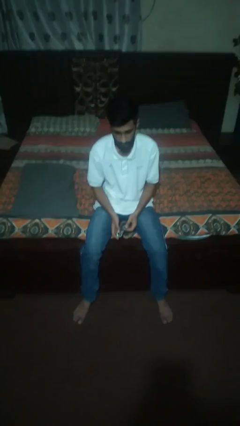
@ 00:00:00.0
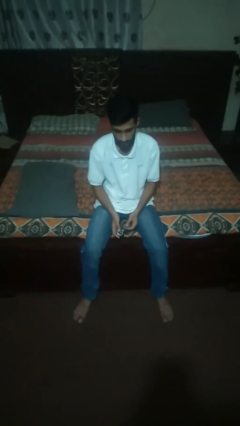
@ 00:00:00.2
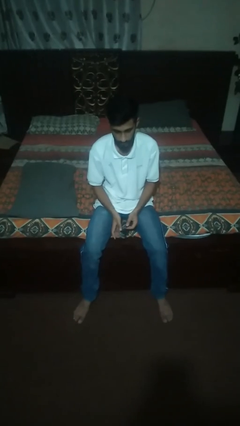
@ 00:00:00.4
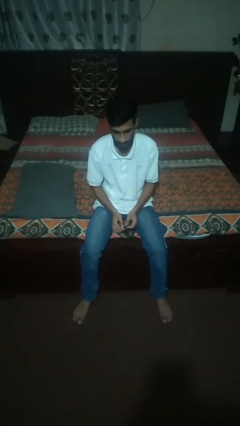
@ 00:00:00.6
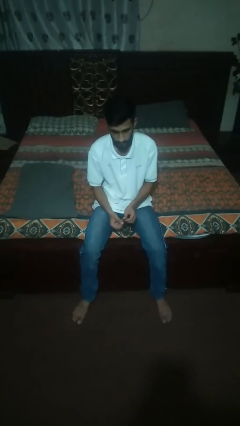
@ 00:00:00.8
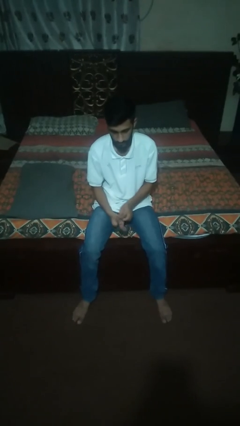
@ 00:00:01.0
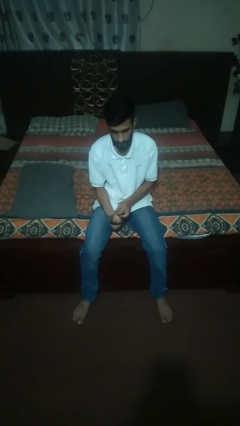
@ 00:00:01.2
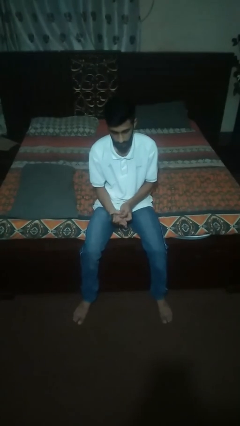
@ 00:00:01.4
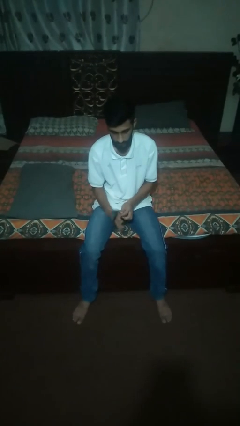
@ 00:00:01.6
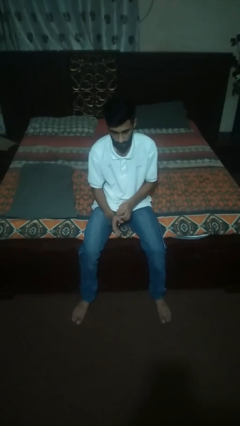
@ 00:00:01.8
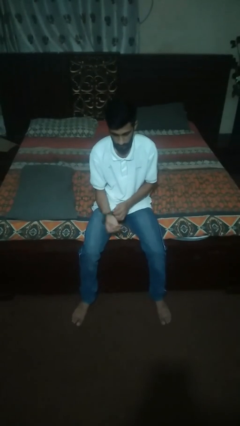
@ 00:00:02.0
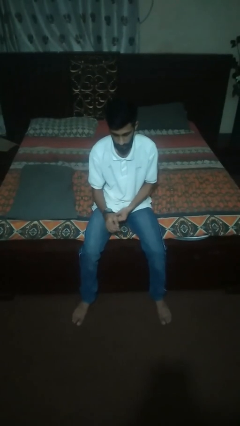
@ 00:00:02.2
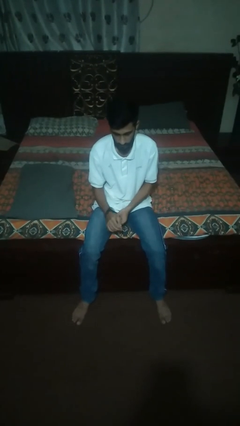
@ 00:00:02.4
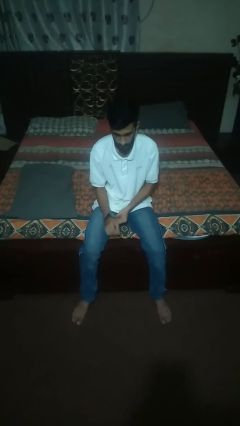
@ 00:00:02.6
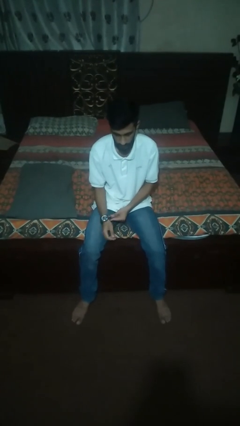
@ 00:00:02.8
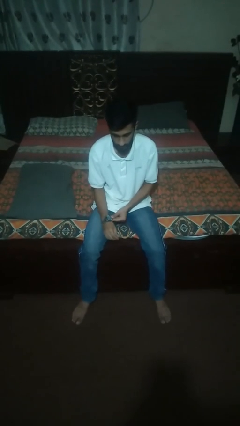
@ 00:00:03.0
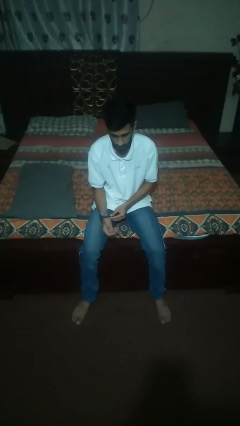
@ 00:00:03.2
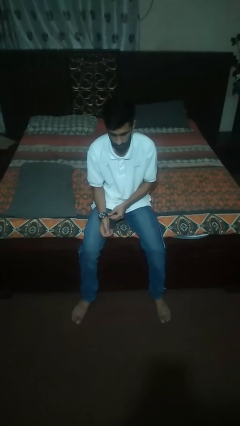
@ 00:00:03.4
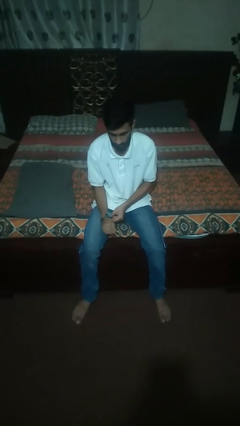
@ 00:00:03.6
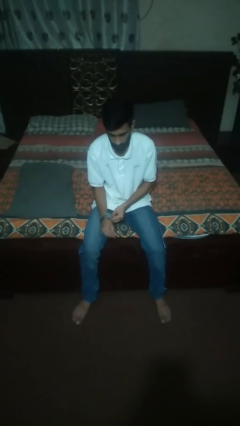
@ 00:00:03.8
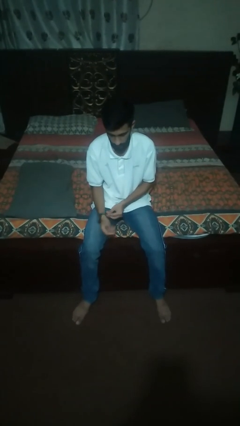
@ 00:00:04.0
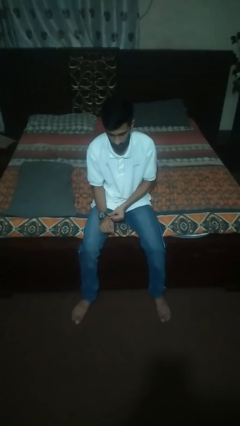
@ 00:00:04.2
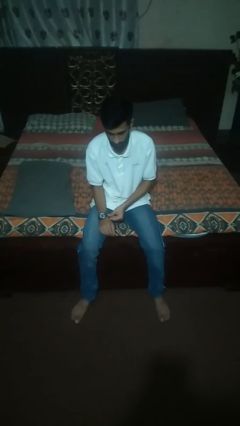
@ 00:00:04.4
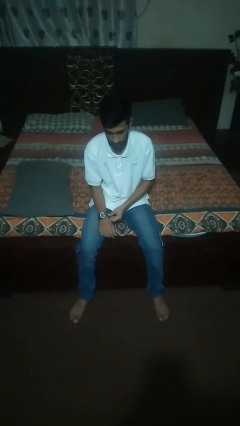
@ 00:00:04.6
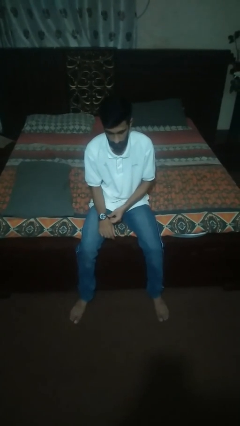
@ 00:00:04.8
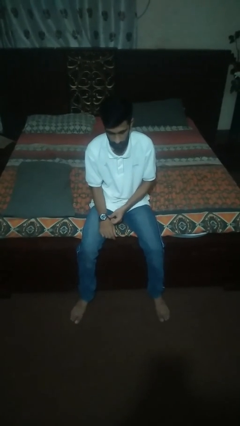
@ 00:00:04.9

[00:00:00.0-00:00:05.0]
person puts on wristwatch

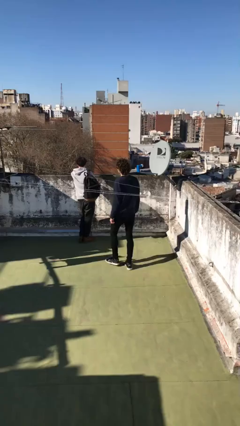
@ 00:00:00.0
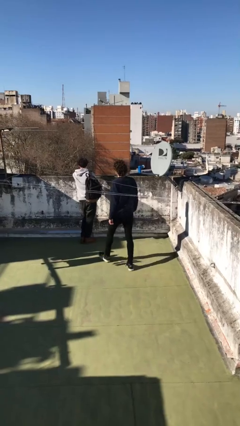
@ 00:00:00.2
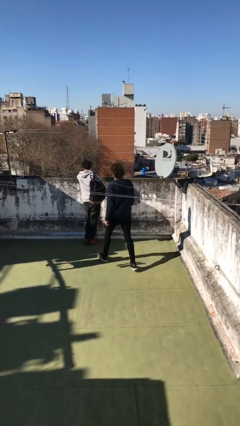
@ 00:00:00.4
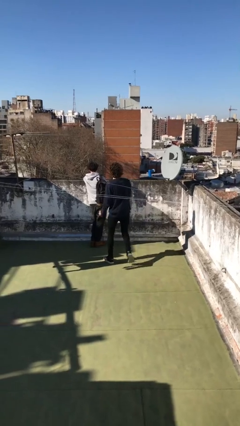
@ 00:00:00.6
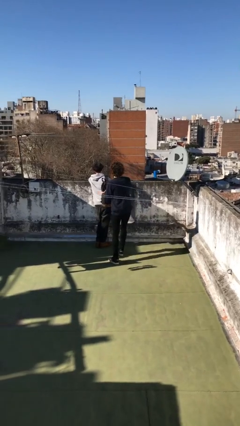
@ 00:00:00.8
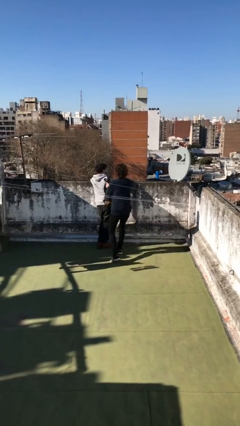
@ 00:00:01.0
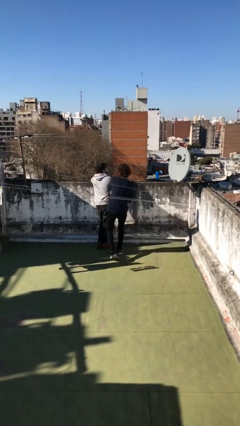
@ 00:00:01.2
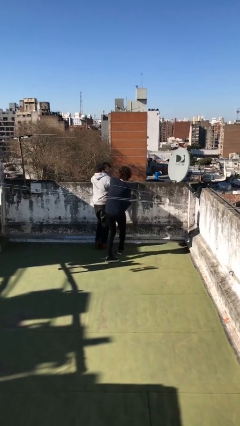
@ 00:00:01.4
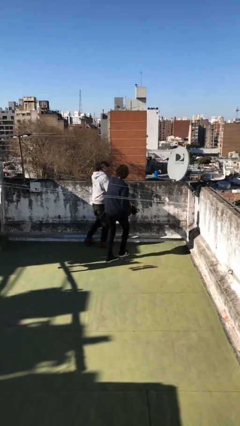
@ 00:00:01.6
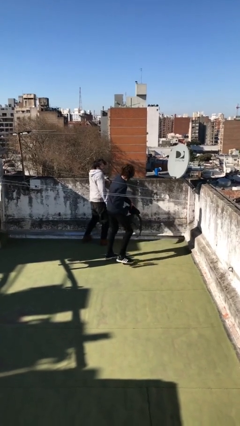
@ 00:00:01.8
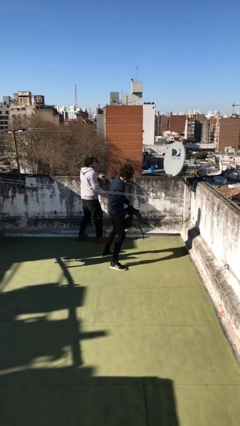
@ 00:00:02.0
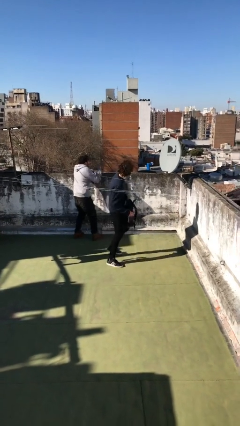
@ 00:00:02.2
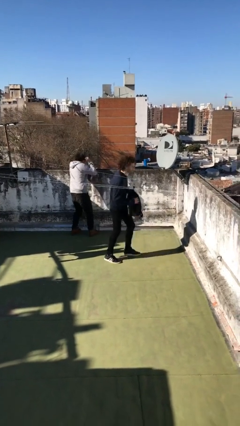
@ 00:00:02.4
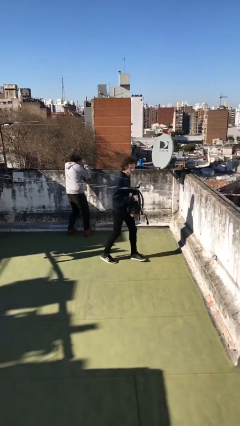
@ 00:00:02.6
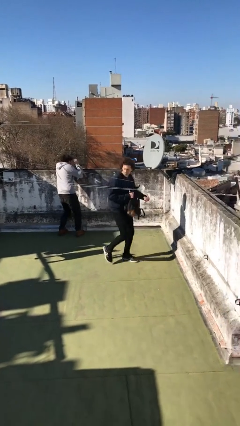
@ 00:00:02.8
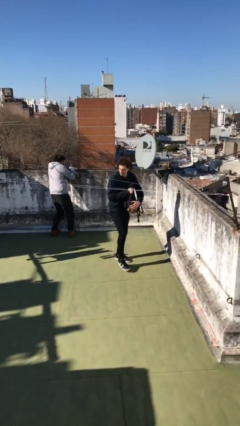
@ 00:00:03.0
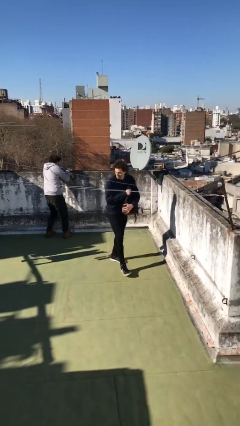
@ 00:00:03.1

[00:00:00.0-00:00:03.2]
person steals object from person

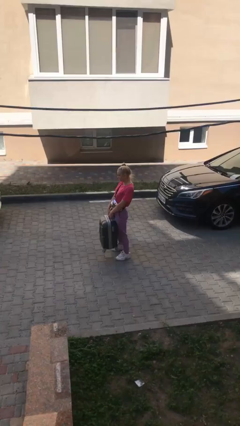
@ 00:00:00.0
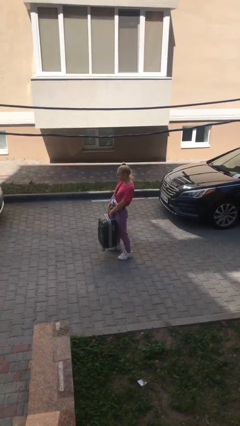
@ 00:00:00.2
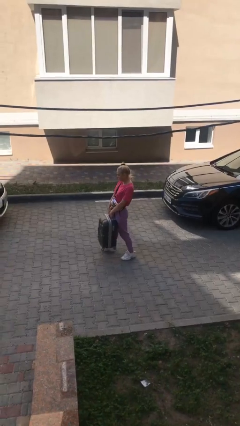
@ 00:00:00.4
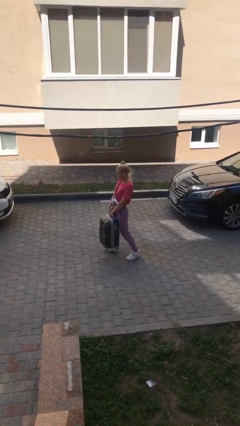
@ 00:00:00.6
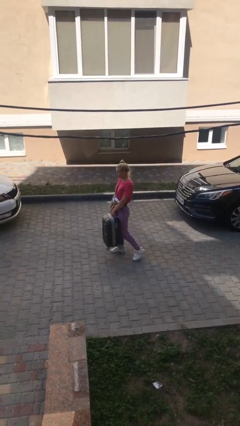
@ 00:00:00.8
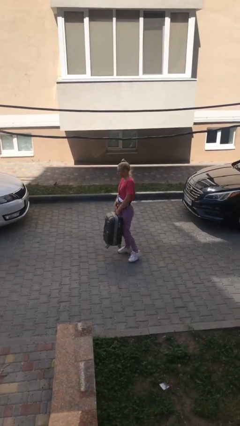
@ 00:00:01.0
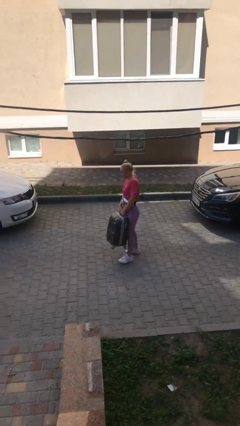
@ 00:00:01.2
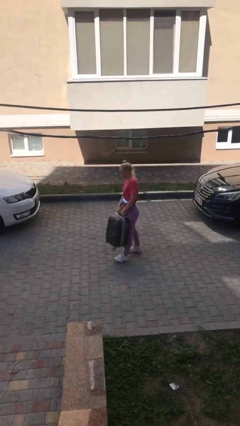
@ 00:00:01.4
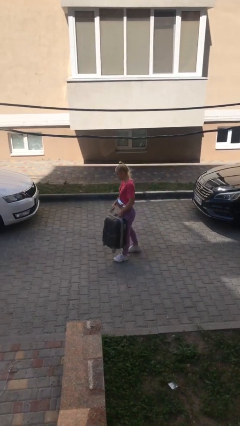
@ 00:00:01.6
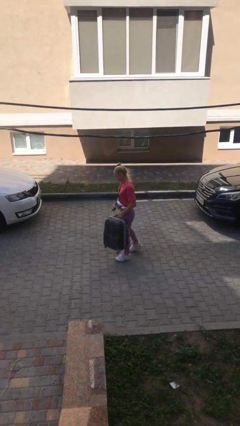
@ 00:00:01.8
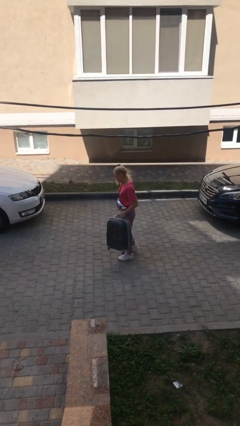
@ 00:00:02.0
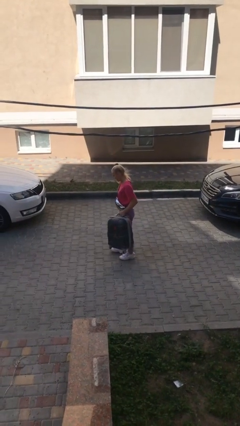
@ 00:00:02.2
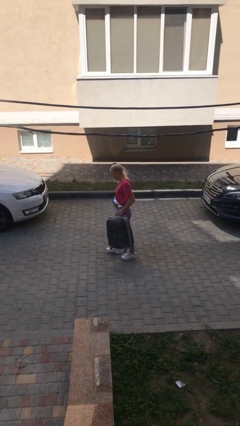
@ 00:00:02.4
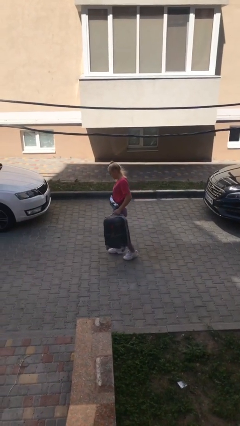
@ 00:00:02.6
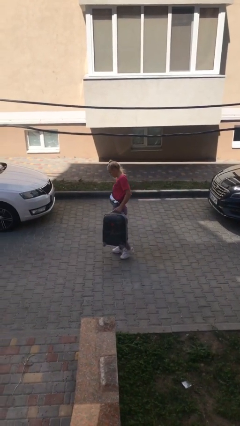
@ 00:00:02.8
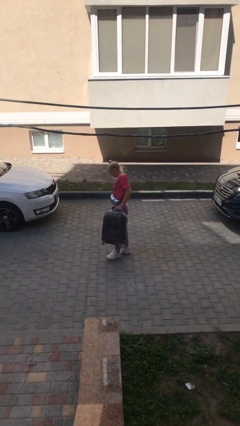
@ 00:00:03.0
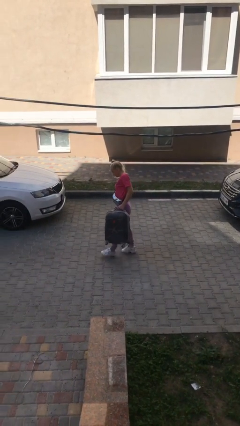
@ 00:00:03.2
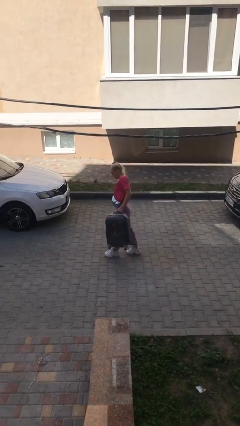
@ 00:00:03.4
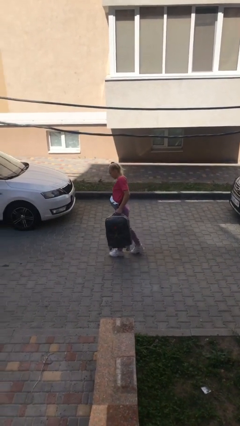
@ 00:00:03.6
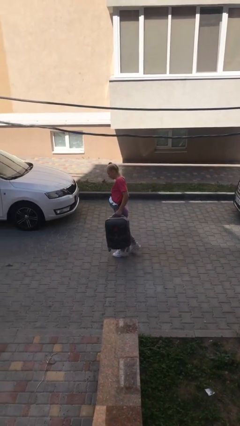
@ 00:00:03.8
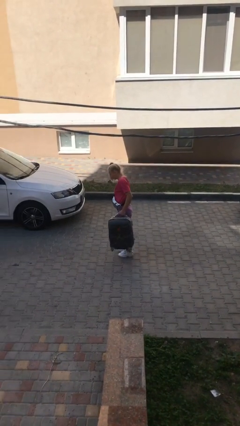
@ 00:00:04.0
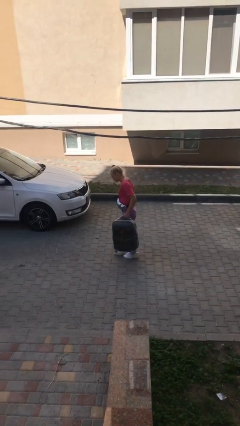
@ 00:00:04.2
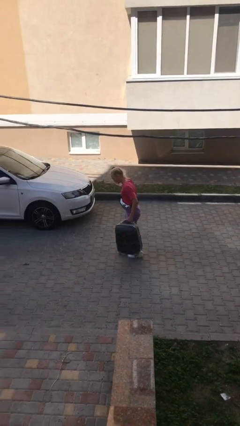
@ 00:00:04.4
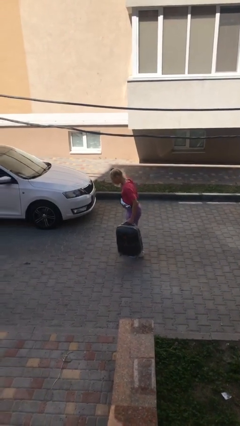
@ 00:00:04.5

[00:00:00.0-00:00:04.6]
person carries heavy object

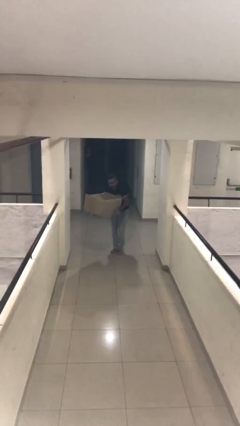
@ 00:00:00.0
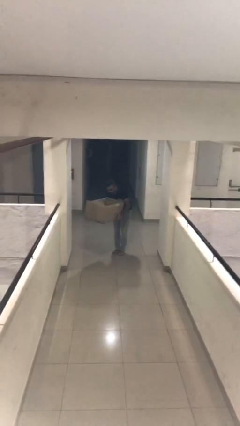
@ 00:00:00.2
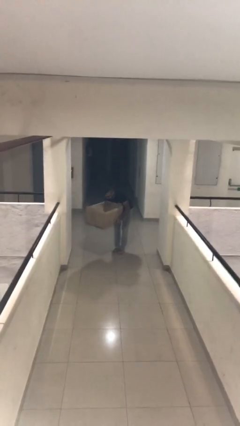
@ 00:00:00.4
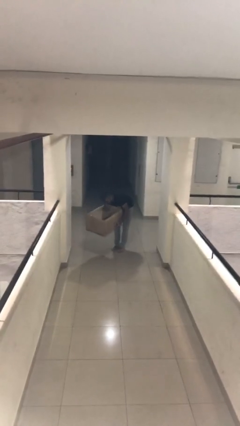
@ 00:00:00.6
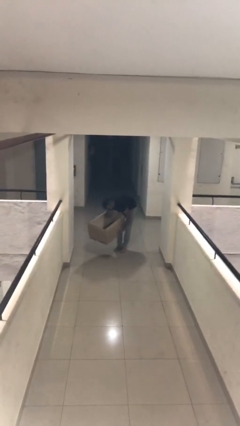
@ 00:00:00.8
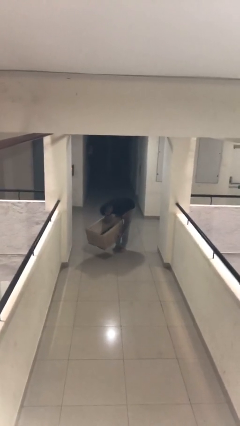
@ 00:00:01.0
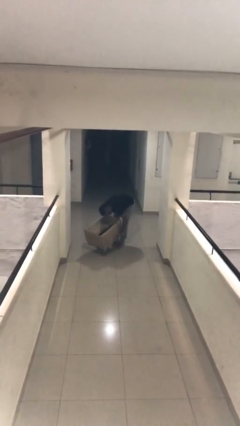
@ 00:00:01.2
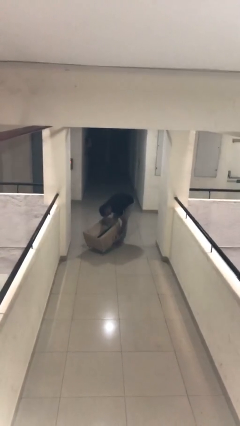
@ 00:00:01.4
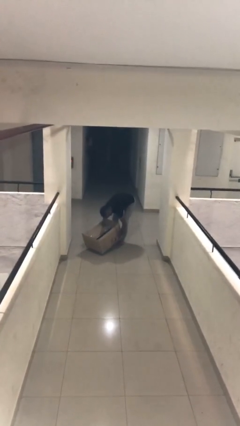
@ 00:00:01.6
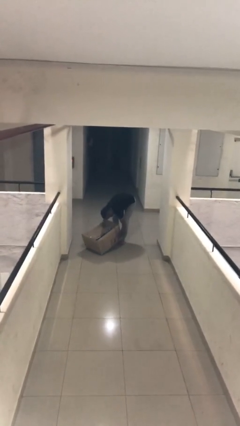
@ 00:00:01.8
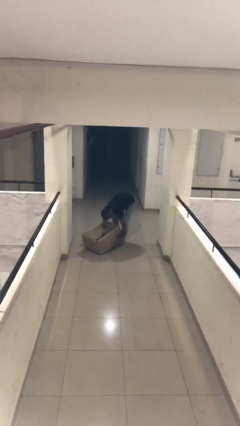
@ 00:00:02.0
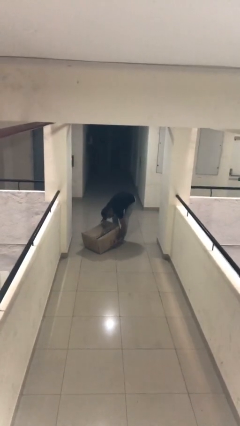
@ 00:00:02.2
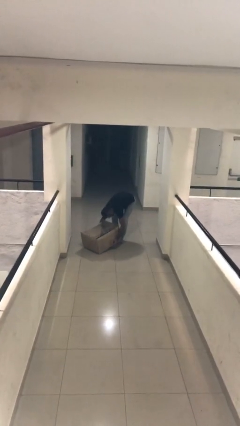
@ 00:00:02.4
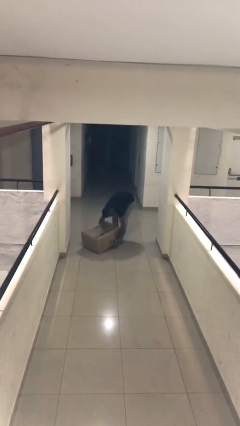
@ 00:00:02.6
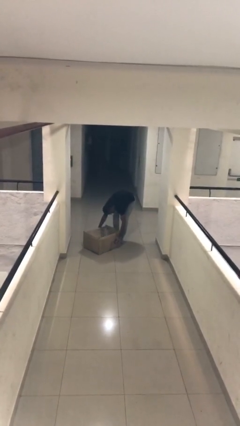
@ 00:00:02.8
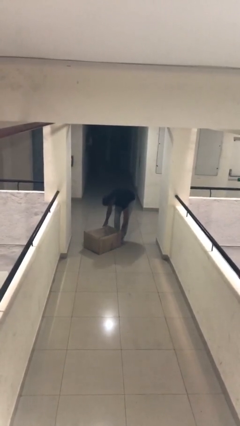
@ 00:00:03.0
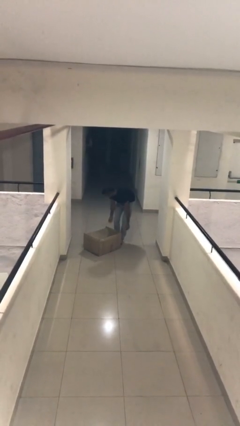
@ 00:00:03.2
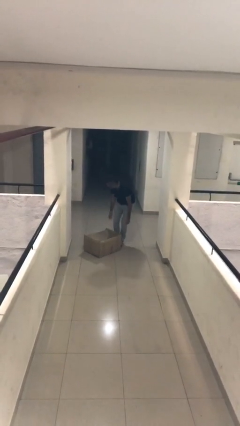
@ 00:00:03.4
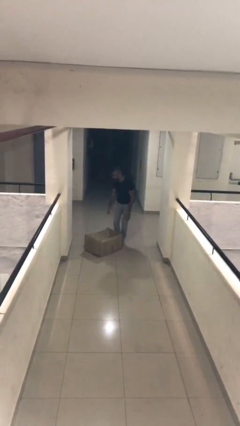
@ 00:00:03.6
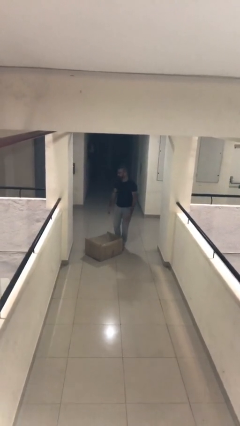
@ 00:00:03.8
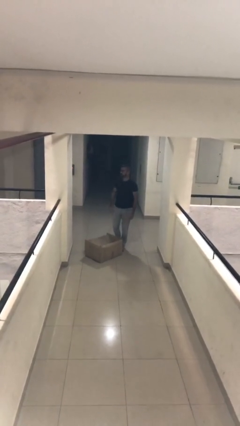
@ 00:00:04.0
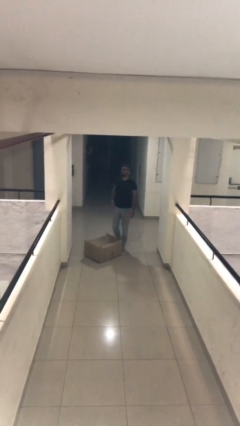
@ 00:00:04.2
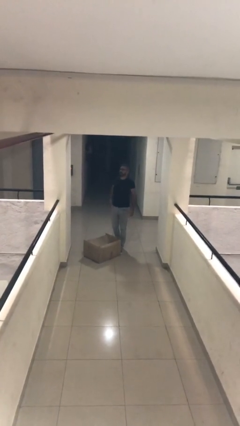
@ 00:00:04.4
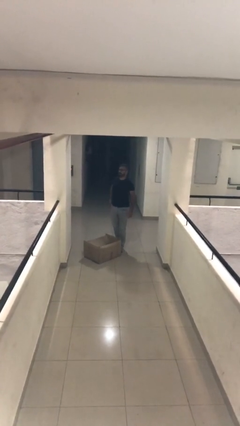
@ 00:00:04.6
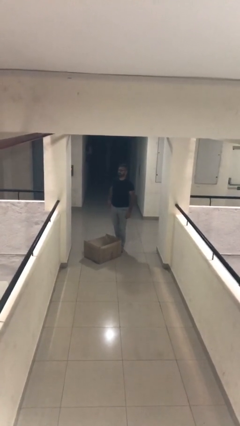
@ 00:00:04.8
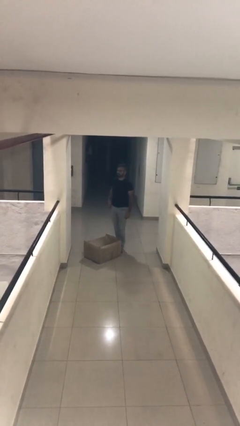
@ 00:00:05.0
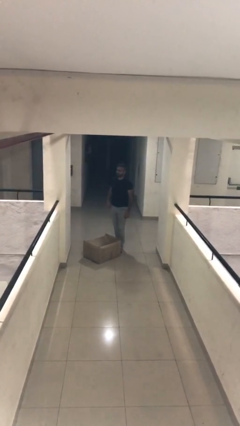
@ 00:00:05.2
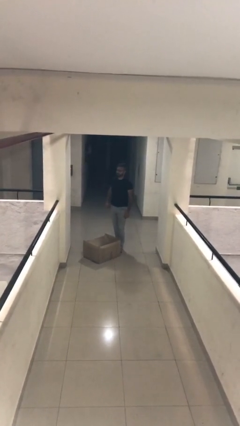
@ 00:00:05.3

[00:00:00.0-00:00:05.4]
person puts down object on floor
